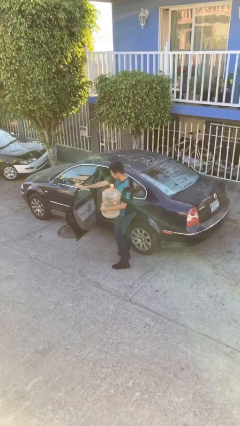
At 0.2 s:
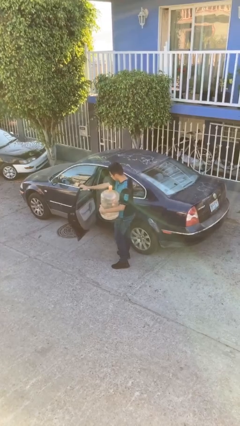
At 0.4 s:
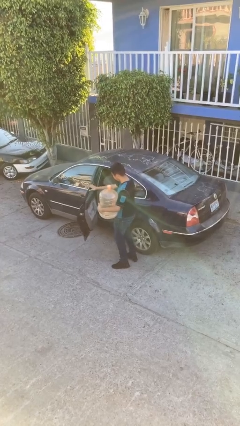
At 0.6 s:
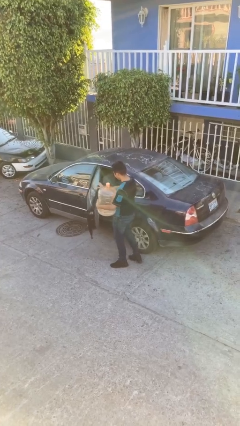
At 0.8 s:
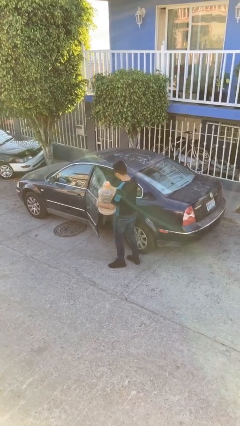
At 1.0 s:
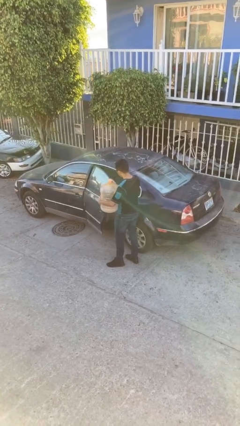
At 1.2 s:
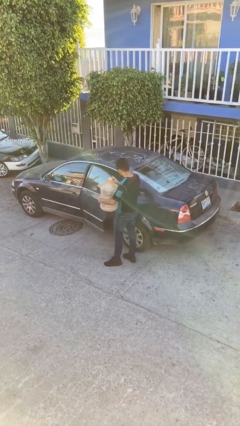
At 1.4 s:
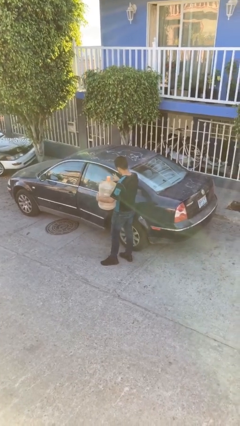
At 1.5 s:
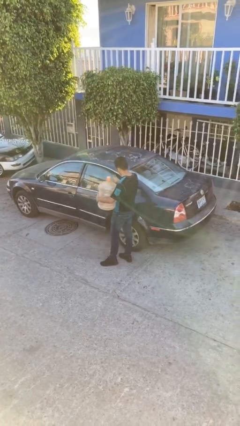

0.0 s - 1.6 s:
person closes car door

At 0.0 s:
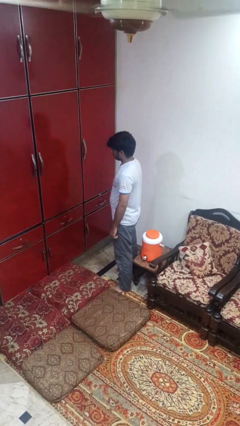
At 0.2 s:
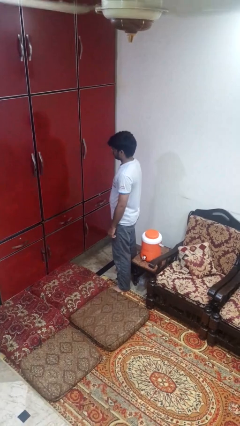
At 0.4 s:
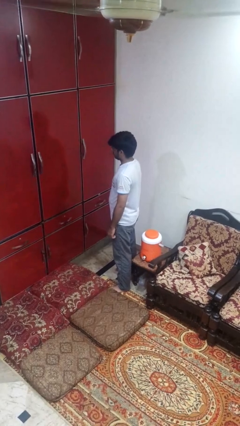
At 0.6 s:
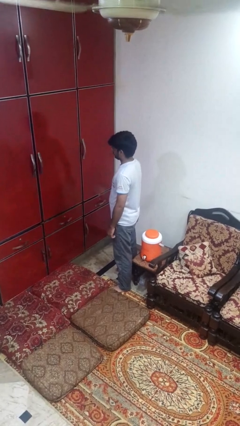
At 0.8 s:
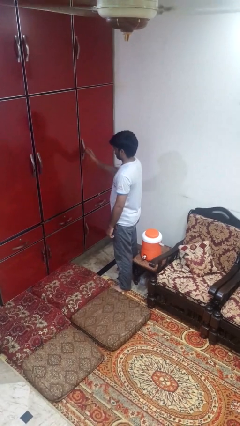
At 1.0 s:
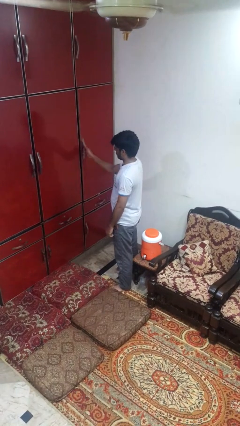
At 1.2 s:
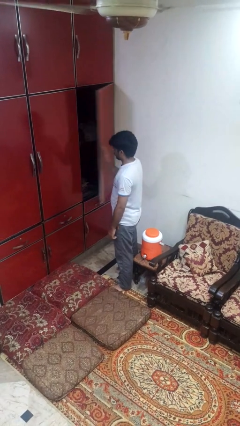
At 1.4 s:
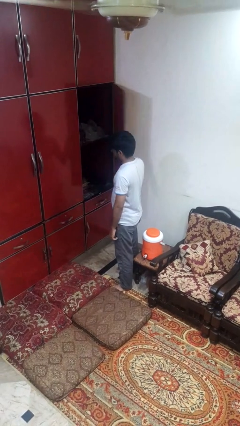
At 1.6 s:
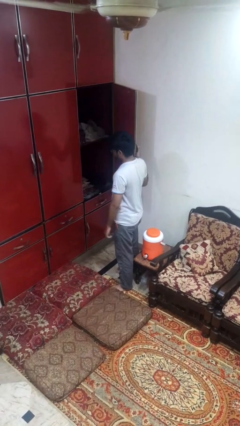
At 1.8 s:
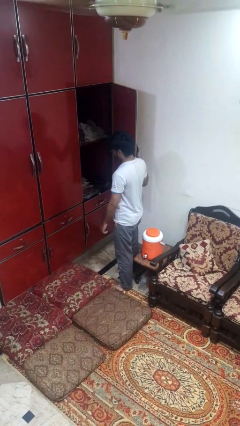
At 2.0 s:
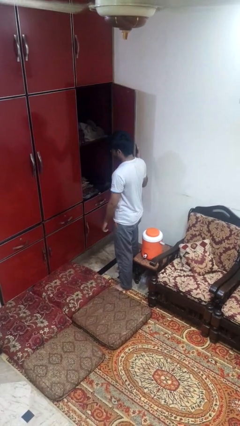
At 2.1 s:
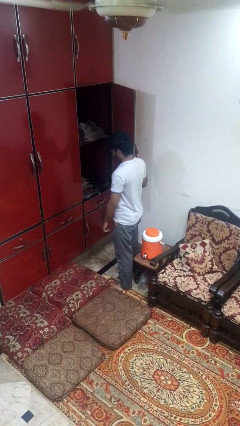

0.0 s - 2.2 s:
person closes cabinet

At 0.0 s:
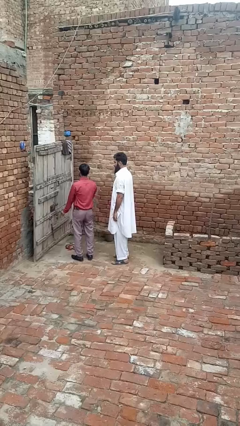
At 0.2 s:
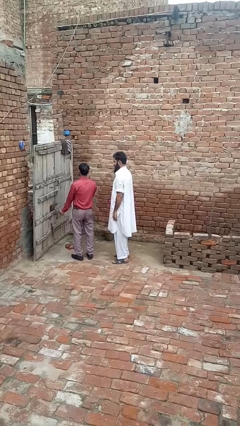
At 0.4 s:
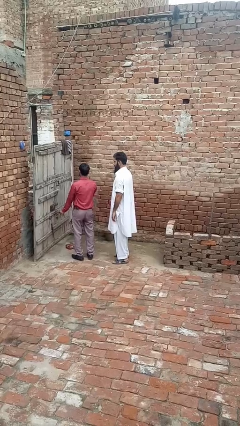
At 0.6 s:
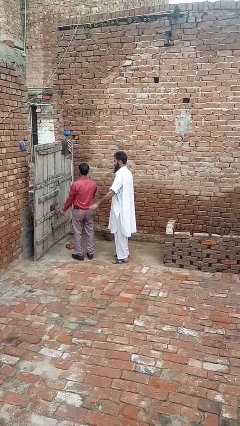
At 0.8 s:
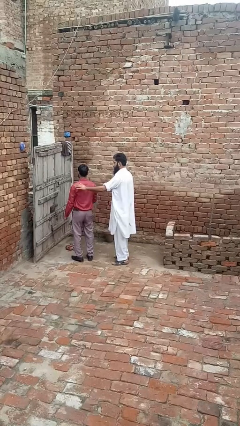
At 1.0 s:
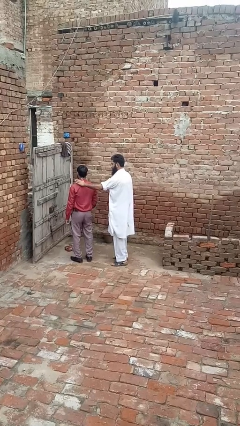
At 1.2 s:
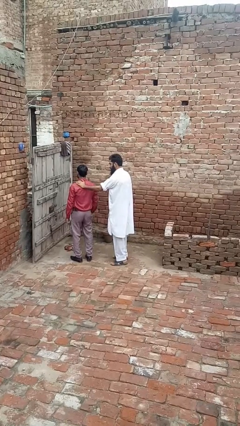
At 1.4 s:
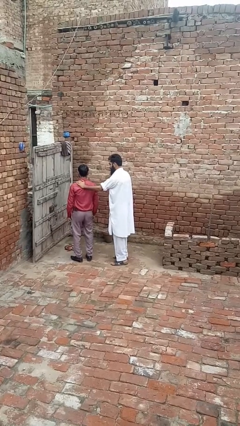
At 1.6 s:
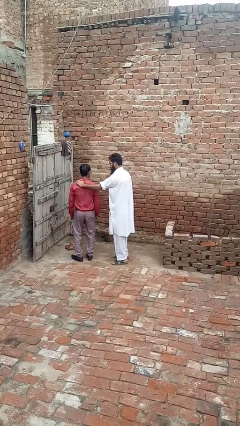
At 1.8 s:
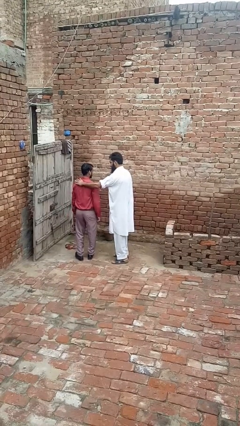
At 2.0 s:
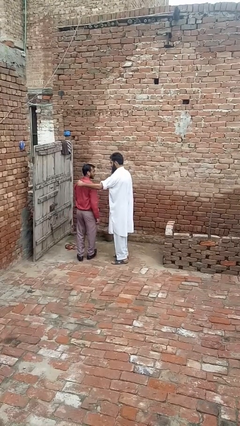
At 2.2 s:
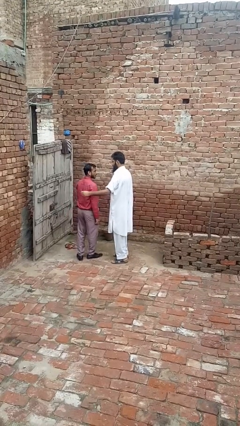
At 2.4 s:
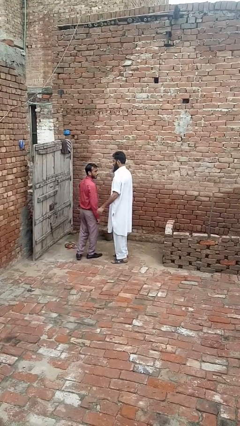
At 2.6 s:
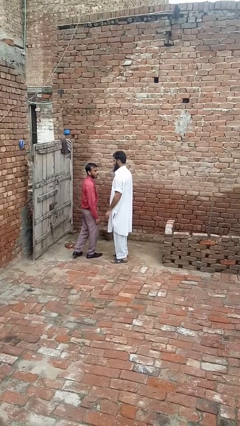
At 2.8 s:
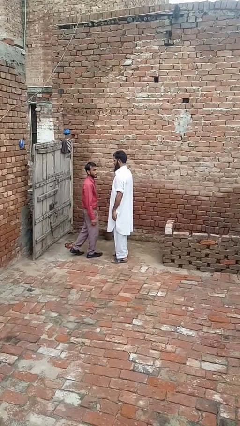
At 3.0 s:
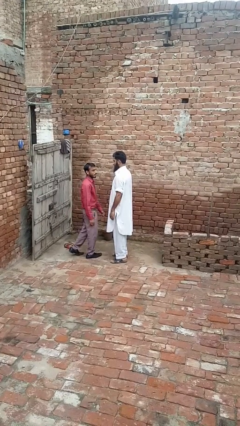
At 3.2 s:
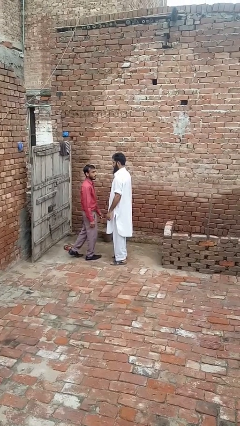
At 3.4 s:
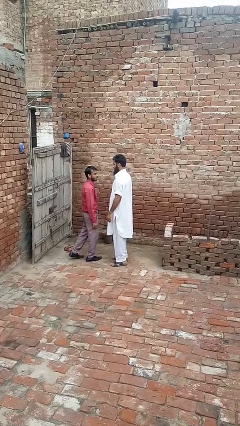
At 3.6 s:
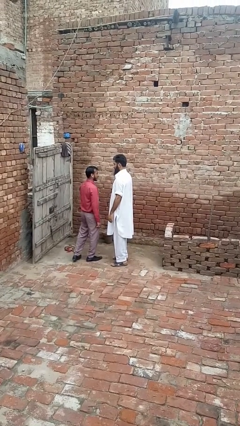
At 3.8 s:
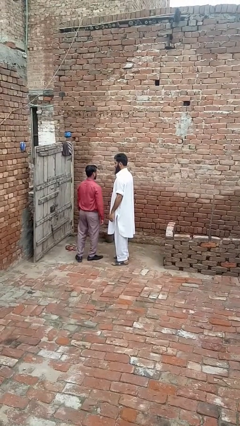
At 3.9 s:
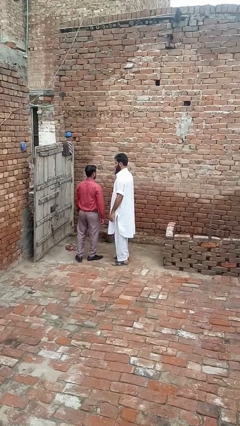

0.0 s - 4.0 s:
person touches back of person

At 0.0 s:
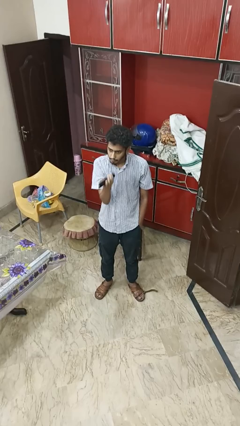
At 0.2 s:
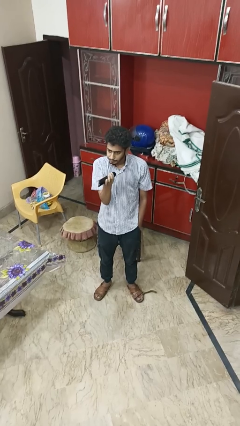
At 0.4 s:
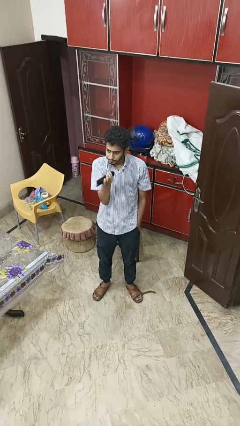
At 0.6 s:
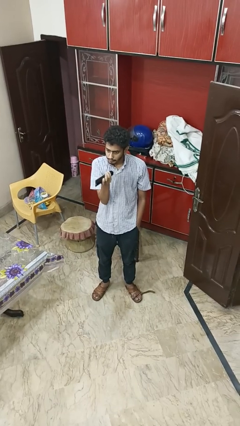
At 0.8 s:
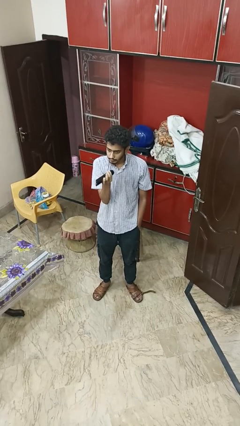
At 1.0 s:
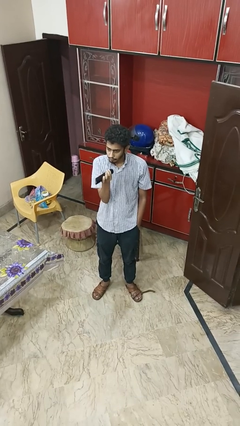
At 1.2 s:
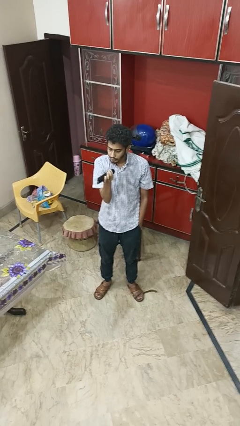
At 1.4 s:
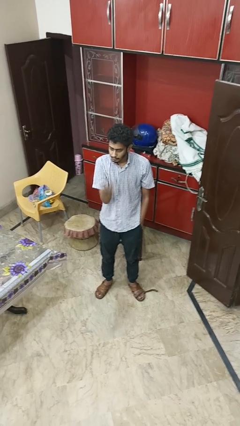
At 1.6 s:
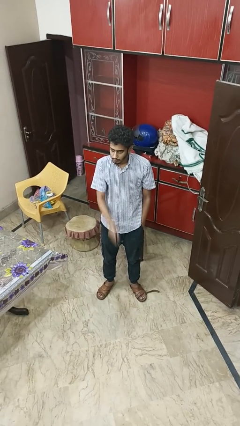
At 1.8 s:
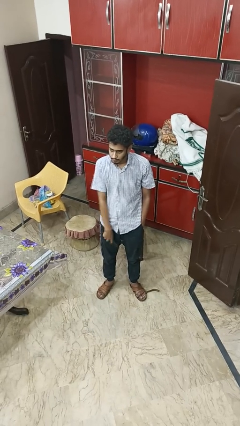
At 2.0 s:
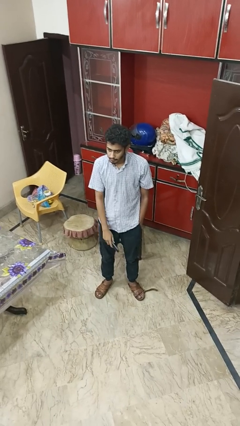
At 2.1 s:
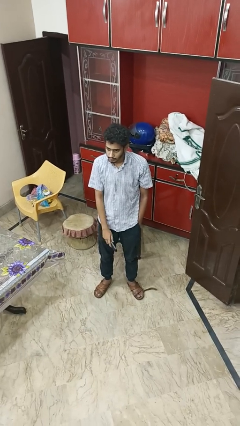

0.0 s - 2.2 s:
person uses television remote

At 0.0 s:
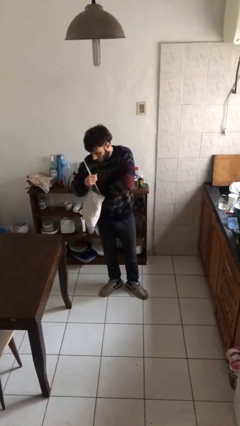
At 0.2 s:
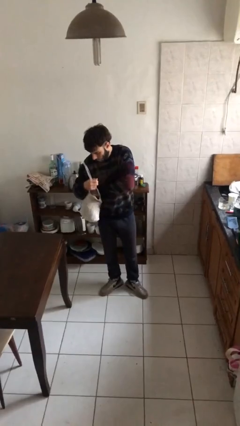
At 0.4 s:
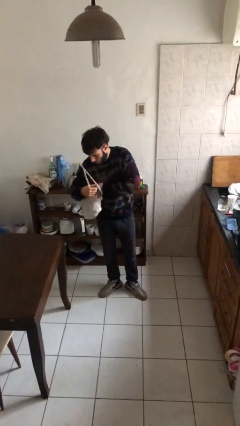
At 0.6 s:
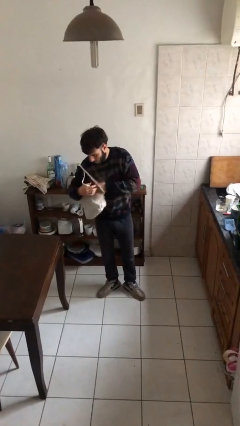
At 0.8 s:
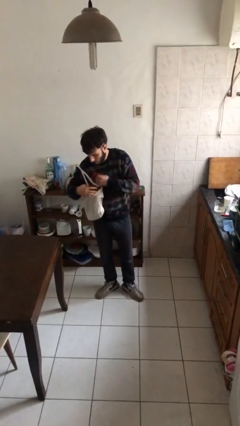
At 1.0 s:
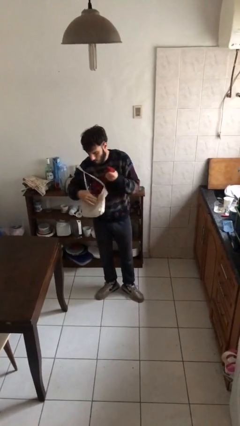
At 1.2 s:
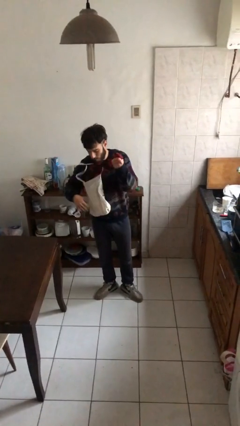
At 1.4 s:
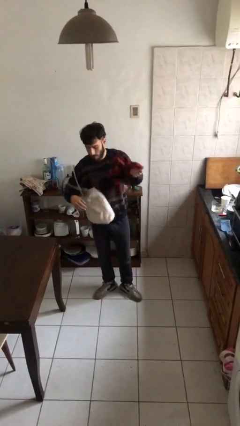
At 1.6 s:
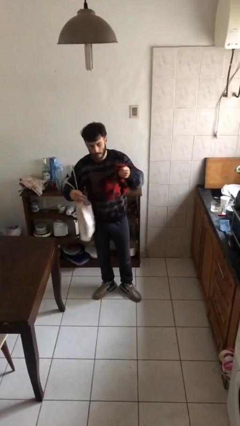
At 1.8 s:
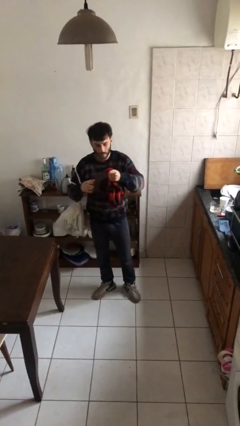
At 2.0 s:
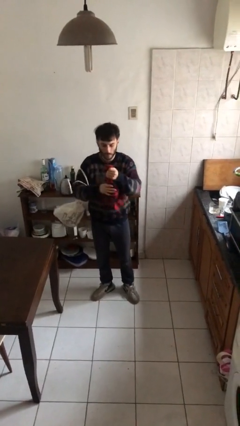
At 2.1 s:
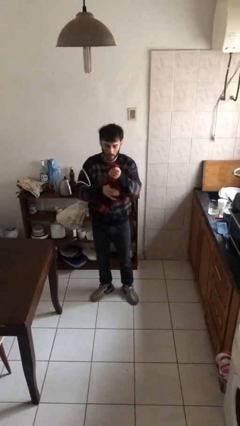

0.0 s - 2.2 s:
person takes object from purse

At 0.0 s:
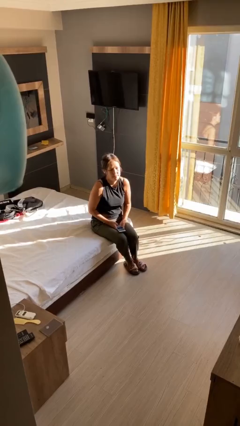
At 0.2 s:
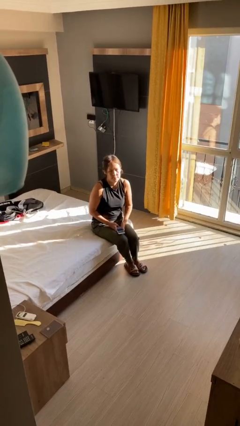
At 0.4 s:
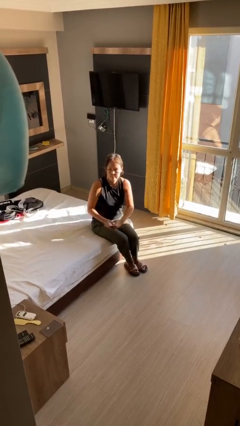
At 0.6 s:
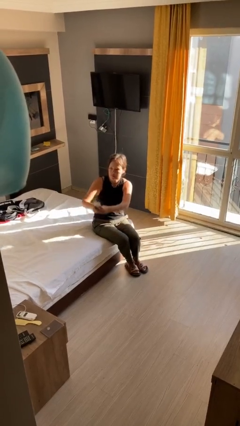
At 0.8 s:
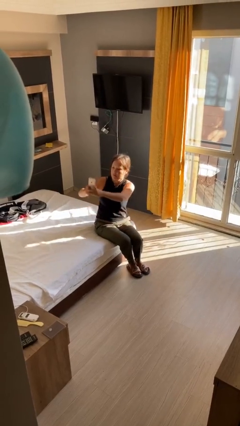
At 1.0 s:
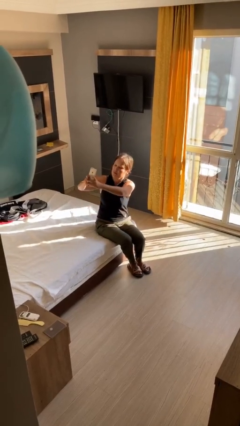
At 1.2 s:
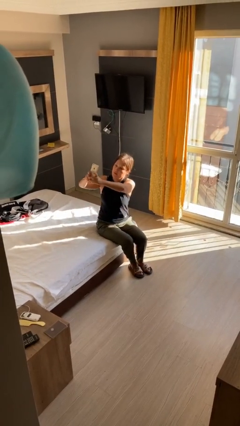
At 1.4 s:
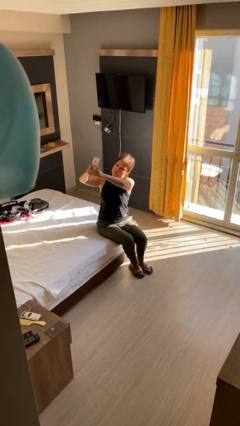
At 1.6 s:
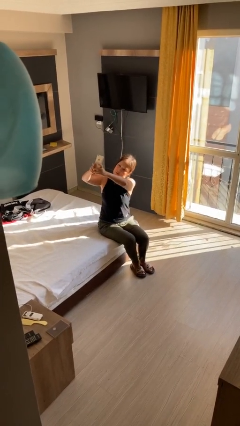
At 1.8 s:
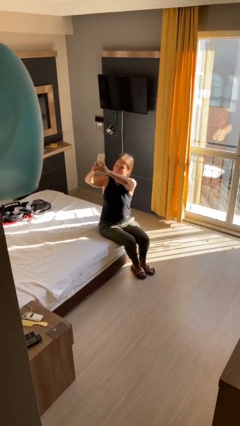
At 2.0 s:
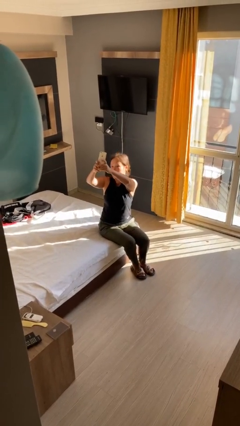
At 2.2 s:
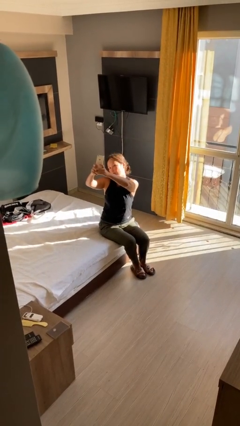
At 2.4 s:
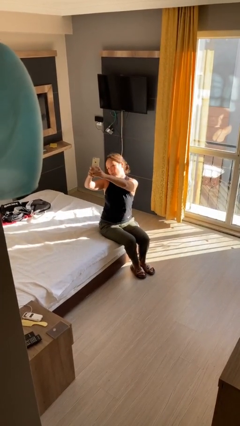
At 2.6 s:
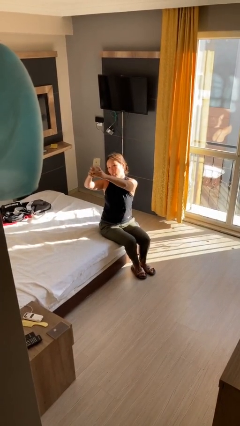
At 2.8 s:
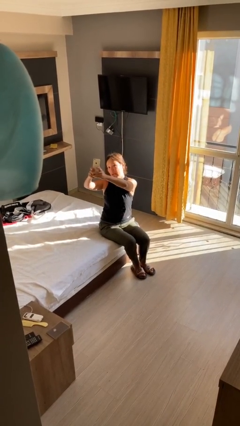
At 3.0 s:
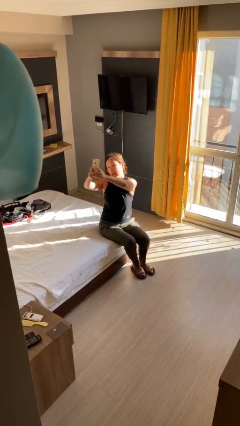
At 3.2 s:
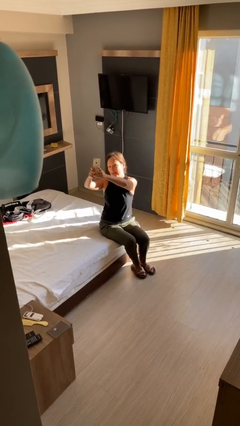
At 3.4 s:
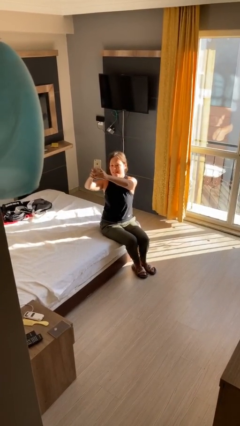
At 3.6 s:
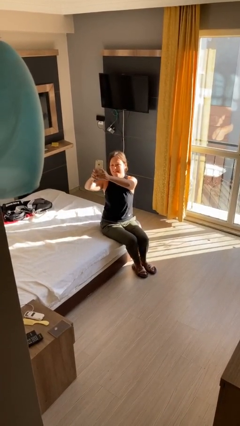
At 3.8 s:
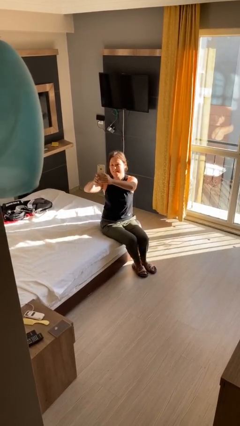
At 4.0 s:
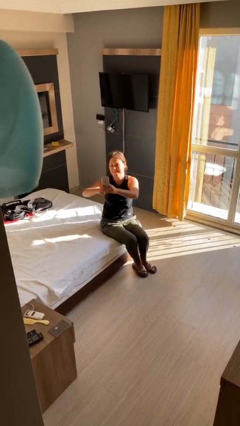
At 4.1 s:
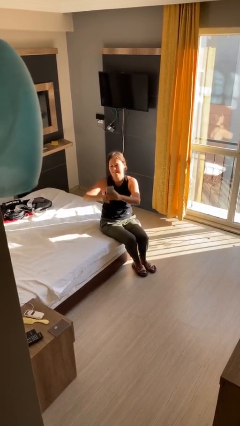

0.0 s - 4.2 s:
person takes selfie

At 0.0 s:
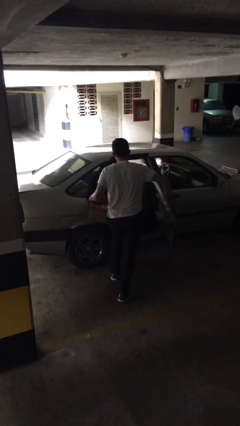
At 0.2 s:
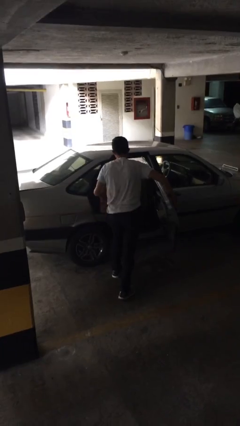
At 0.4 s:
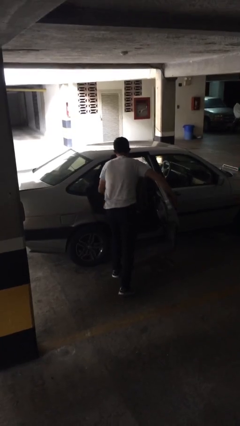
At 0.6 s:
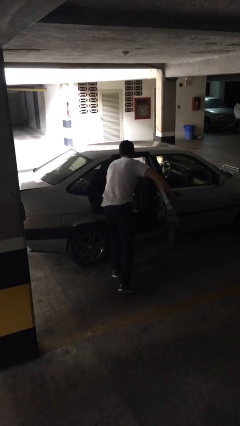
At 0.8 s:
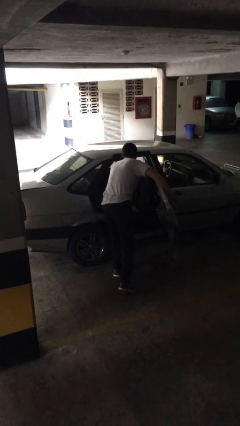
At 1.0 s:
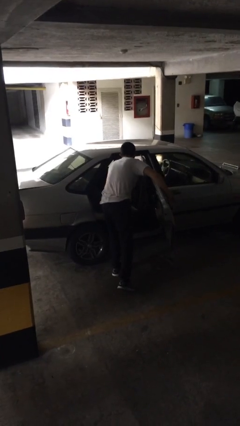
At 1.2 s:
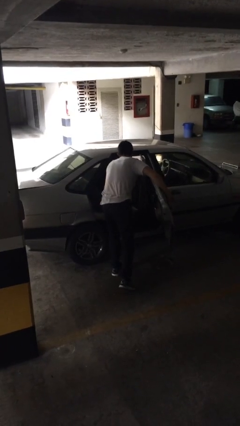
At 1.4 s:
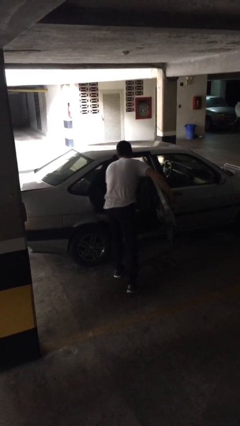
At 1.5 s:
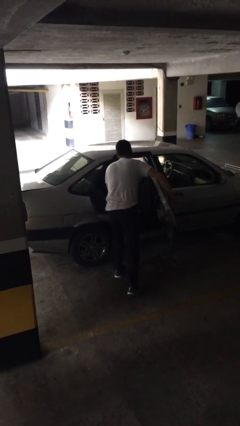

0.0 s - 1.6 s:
person loads car
